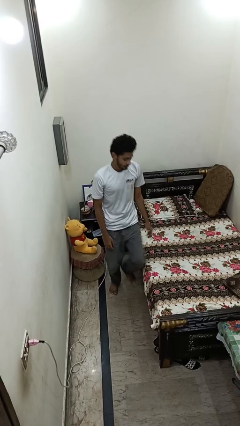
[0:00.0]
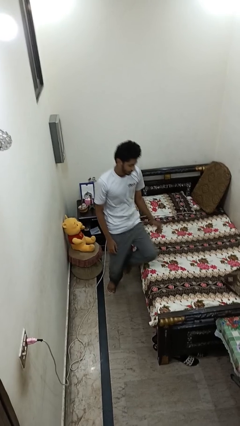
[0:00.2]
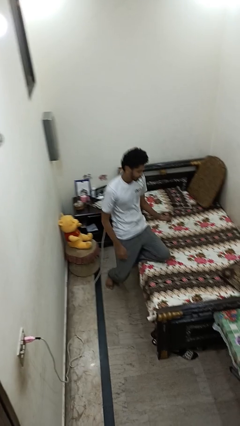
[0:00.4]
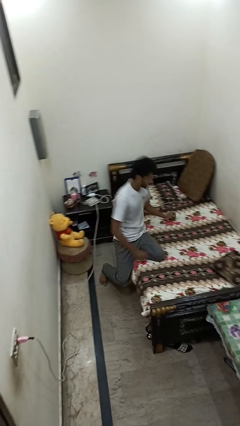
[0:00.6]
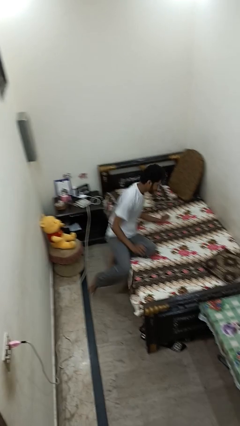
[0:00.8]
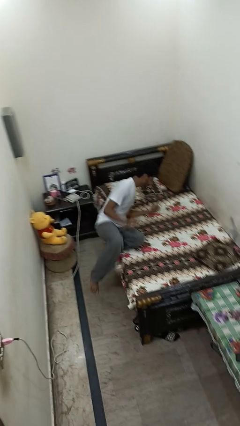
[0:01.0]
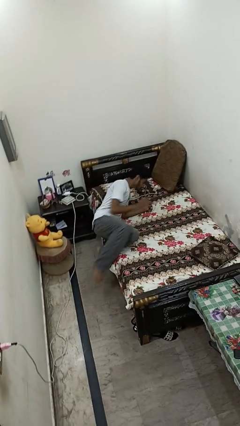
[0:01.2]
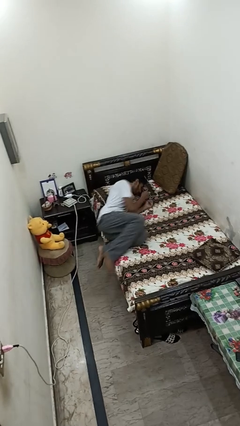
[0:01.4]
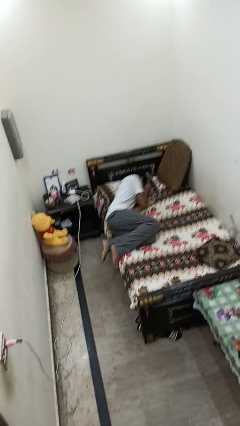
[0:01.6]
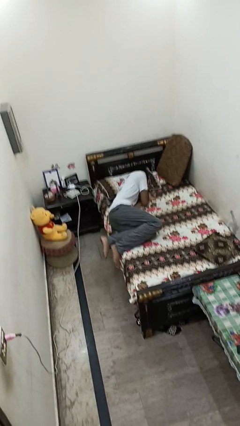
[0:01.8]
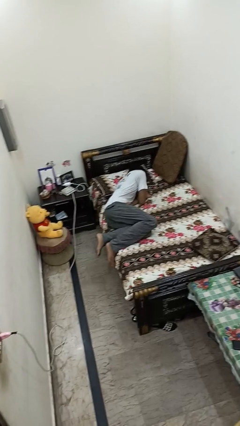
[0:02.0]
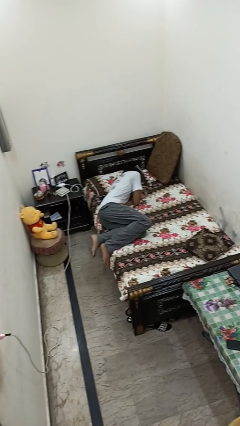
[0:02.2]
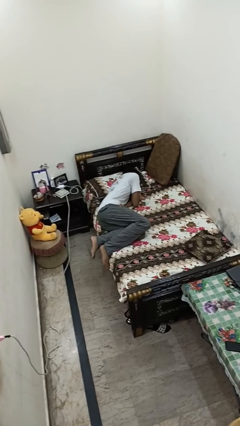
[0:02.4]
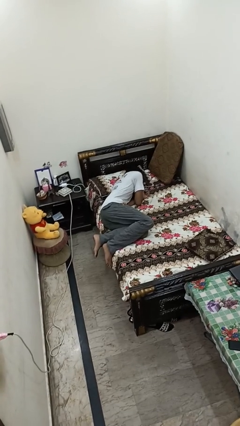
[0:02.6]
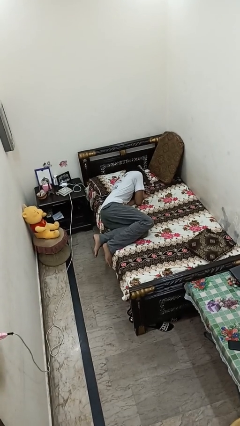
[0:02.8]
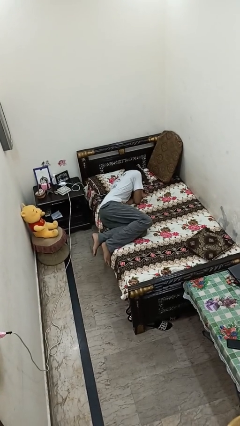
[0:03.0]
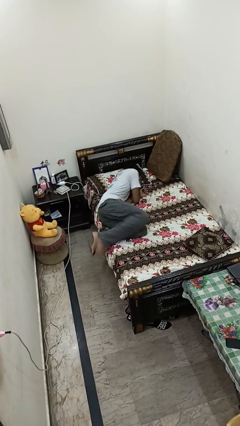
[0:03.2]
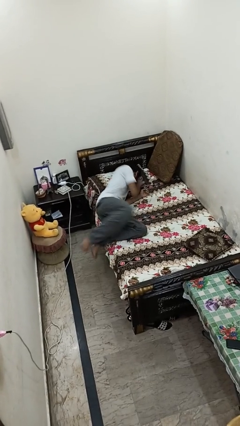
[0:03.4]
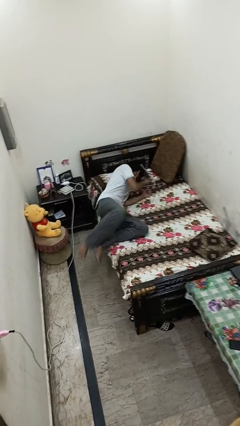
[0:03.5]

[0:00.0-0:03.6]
person lies down on bed

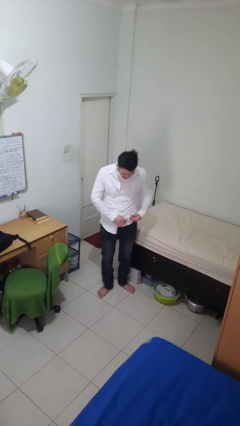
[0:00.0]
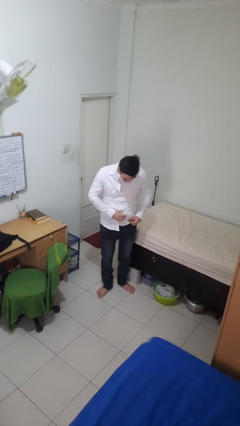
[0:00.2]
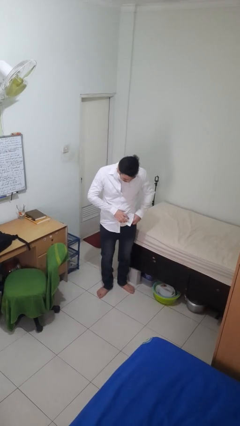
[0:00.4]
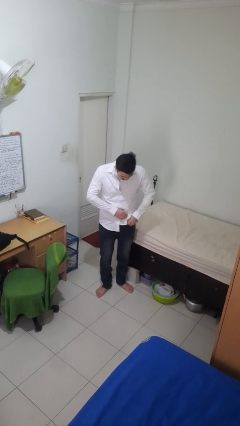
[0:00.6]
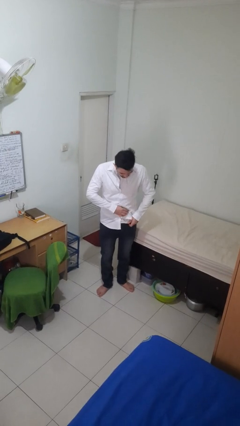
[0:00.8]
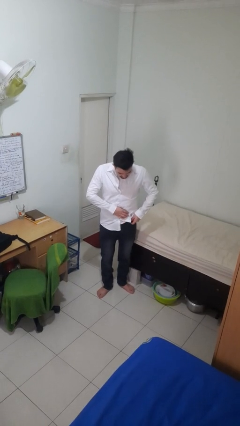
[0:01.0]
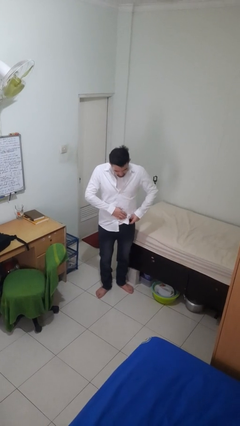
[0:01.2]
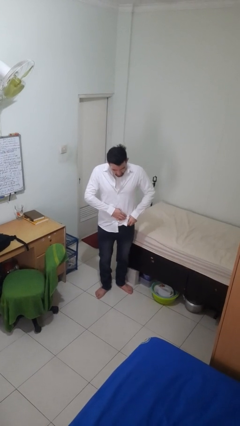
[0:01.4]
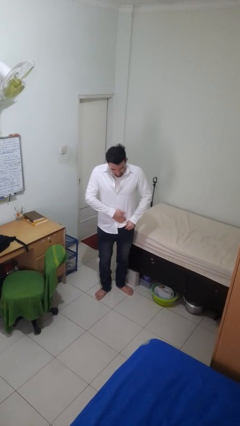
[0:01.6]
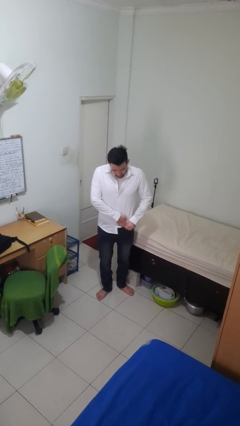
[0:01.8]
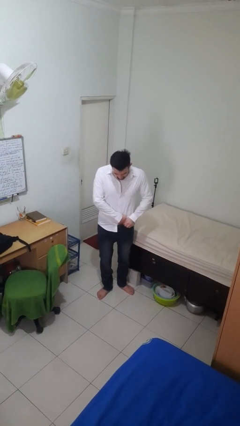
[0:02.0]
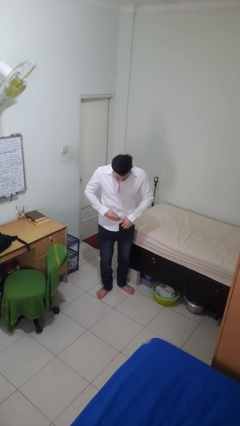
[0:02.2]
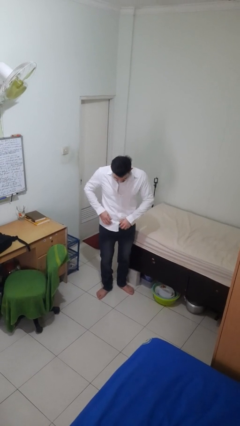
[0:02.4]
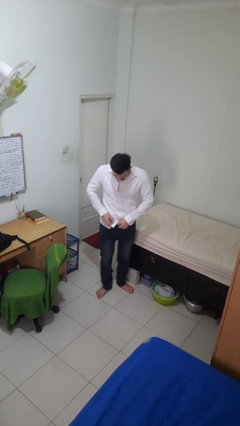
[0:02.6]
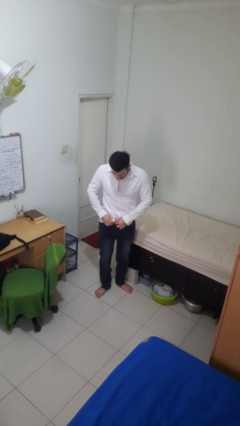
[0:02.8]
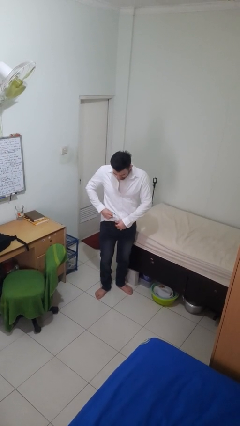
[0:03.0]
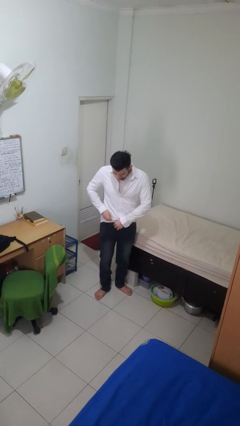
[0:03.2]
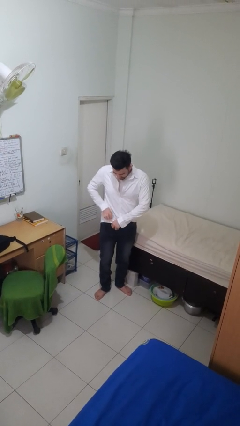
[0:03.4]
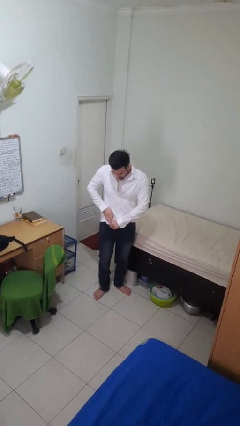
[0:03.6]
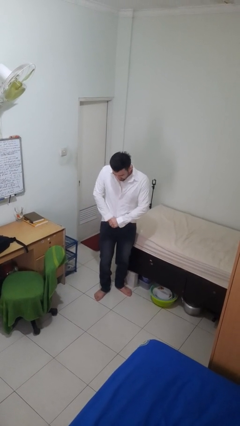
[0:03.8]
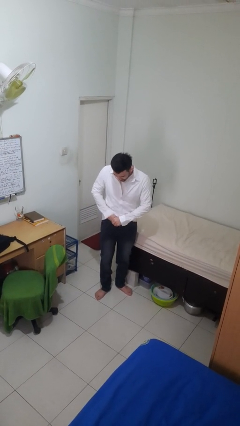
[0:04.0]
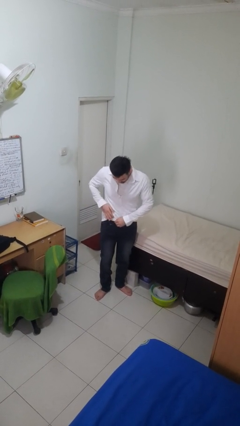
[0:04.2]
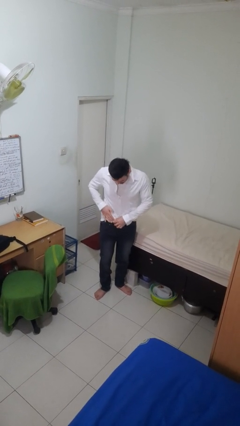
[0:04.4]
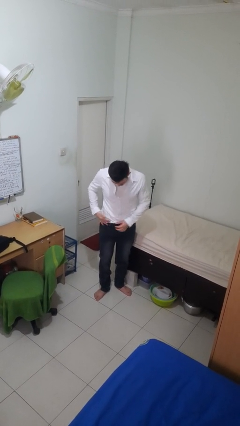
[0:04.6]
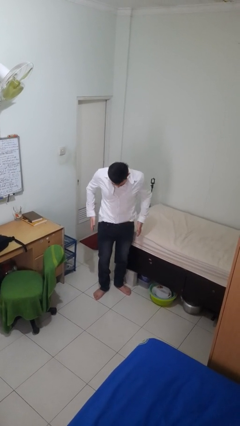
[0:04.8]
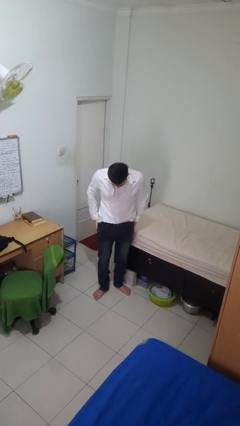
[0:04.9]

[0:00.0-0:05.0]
person tucks in shirt

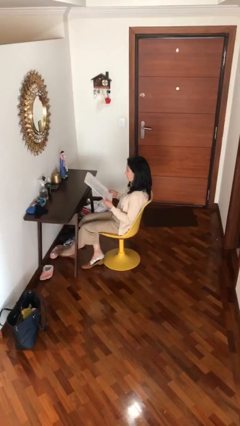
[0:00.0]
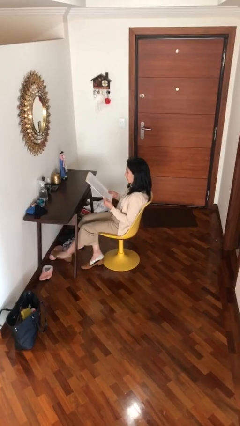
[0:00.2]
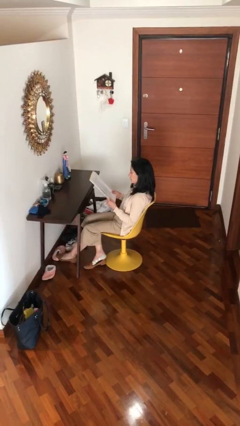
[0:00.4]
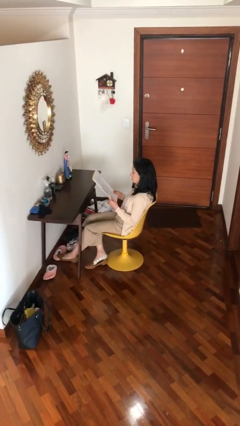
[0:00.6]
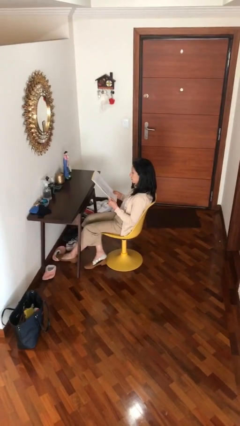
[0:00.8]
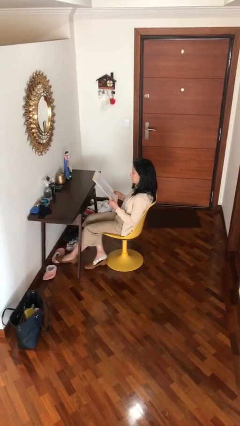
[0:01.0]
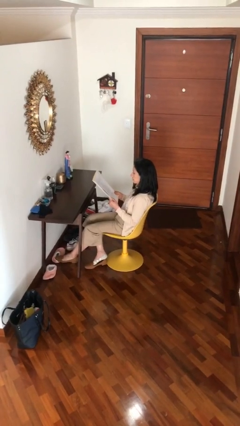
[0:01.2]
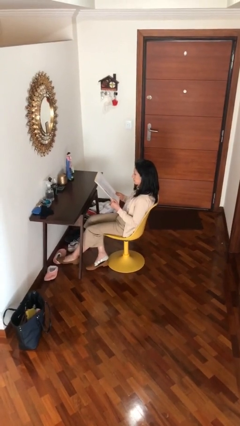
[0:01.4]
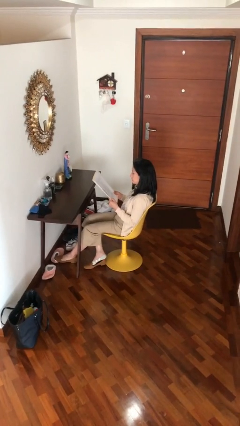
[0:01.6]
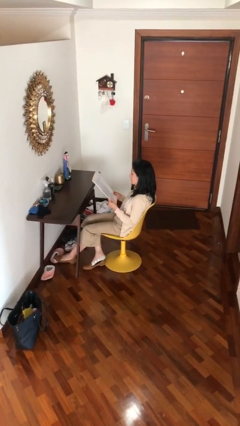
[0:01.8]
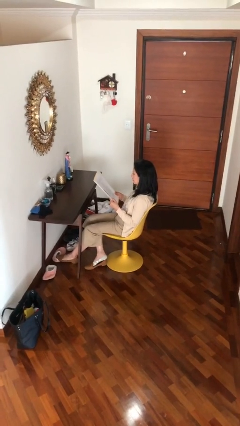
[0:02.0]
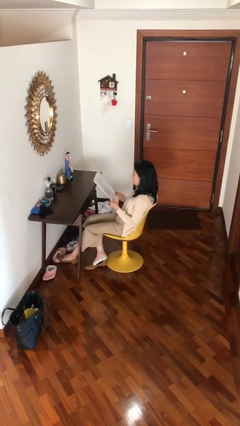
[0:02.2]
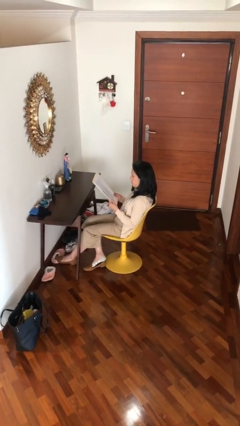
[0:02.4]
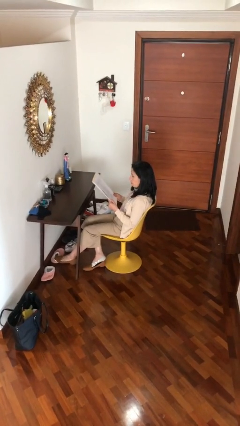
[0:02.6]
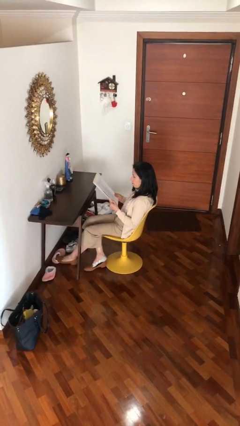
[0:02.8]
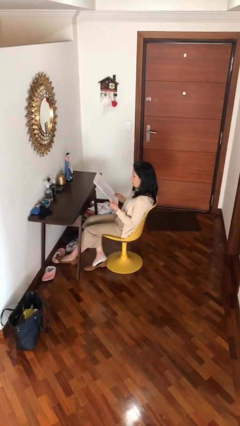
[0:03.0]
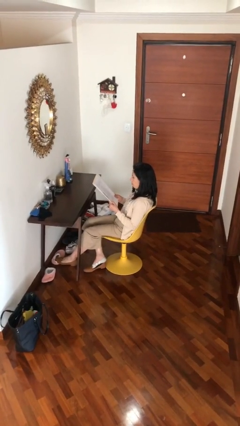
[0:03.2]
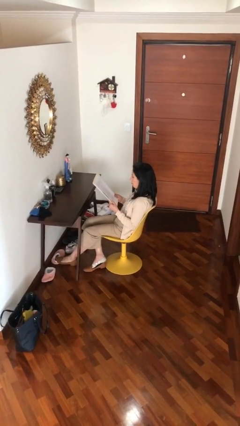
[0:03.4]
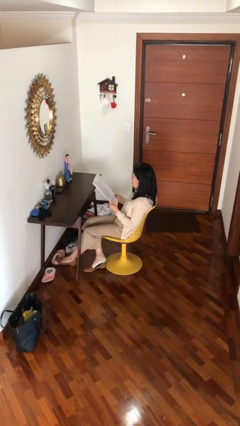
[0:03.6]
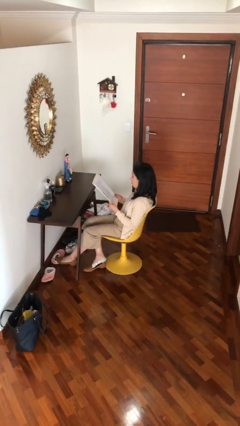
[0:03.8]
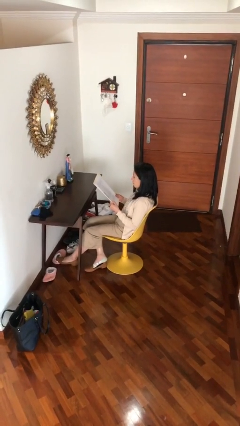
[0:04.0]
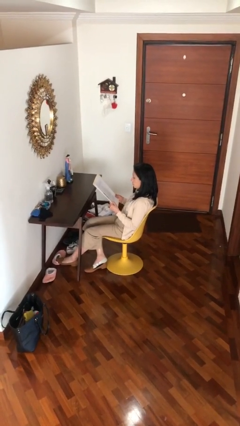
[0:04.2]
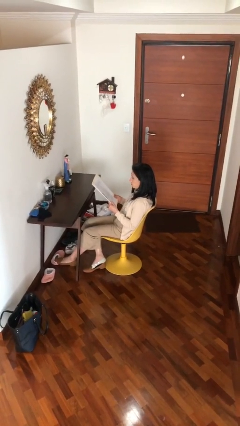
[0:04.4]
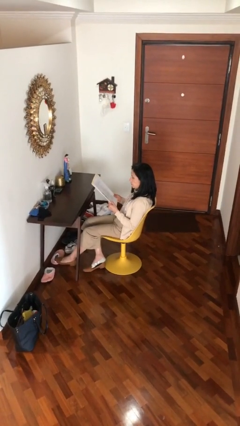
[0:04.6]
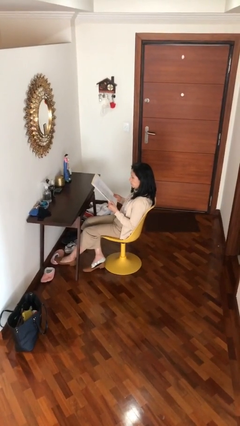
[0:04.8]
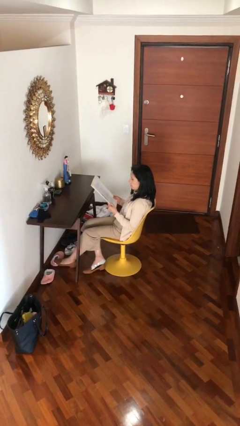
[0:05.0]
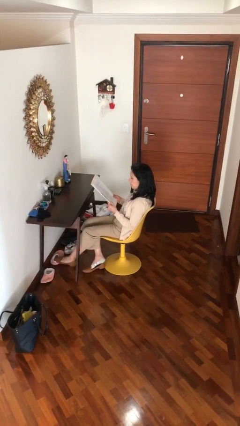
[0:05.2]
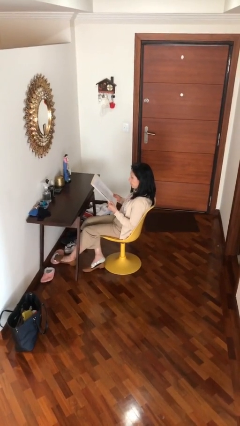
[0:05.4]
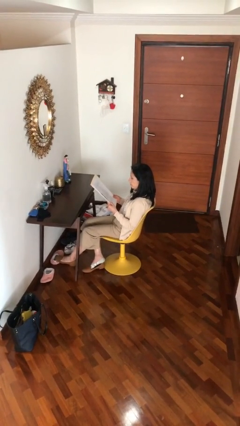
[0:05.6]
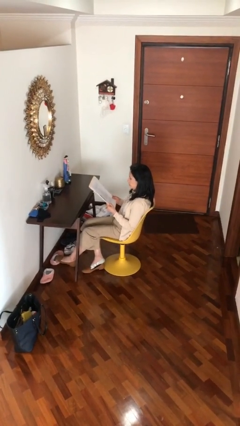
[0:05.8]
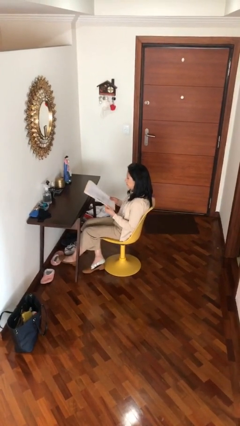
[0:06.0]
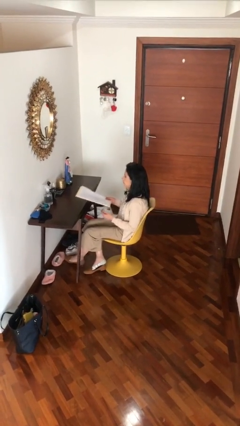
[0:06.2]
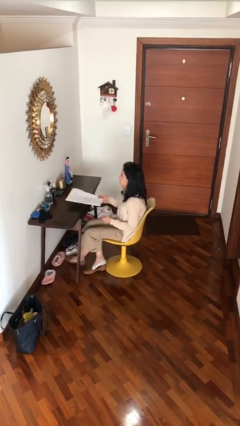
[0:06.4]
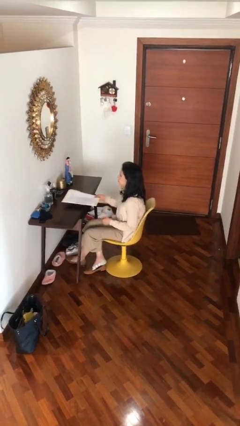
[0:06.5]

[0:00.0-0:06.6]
person reads document

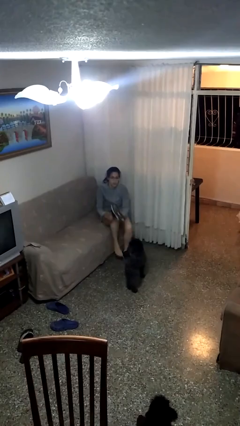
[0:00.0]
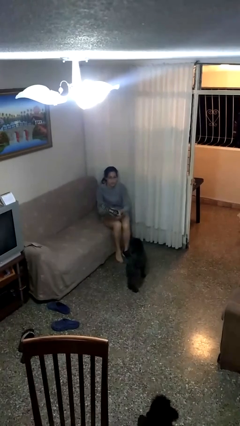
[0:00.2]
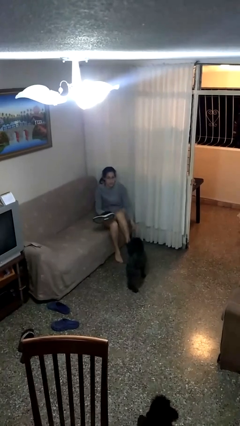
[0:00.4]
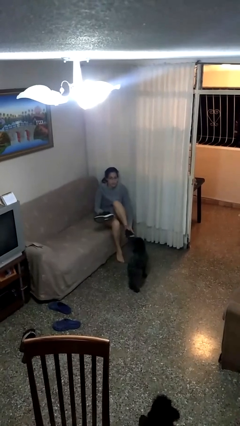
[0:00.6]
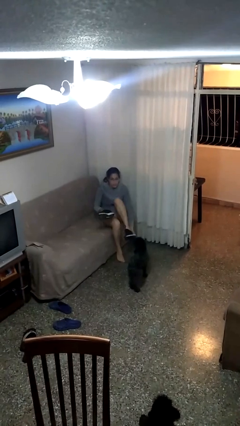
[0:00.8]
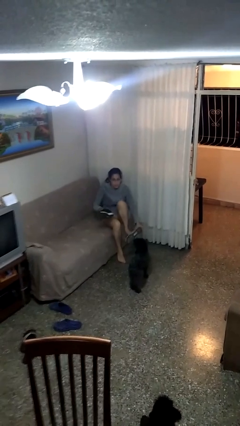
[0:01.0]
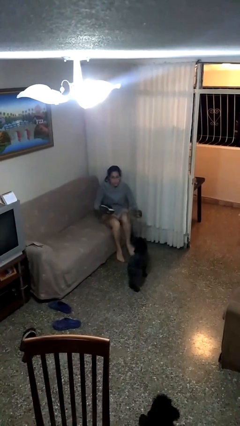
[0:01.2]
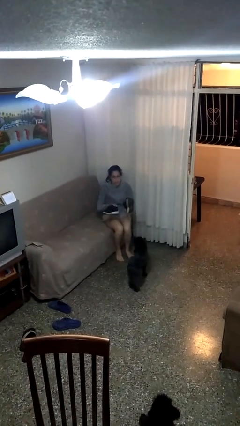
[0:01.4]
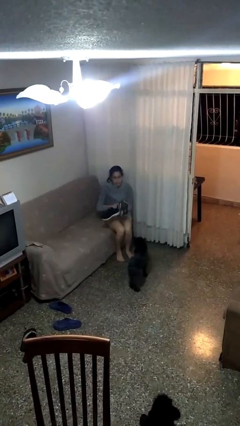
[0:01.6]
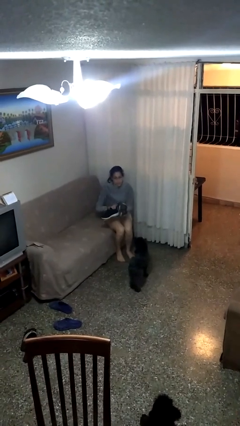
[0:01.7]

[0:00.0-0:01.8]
person takes off shoes

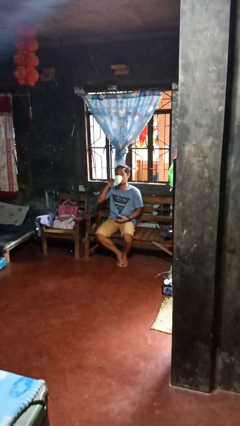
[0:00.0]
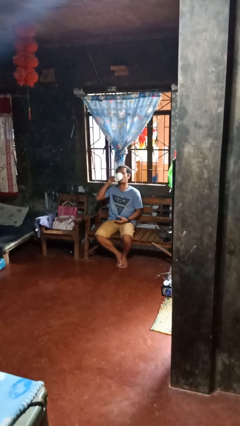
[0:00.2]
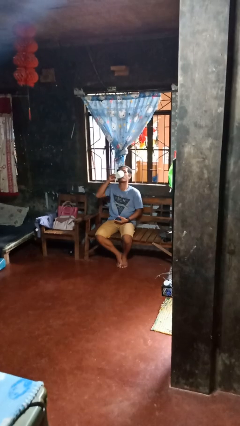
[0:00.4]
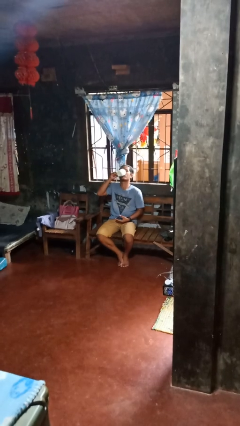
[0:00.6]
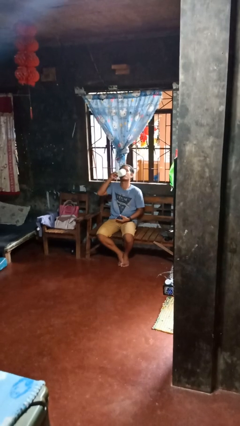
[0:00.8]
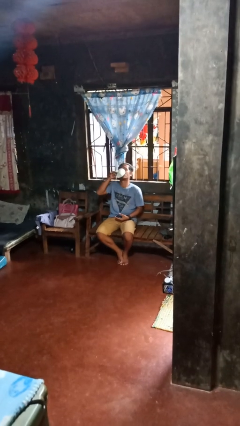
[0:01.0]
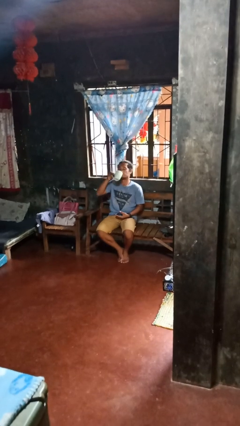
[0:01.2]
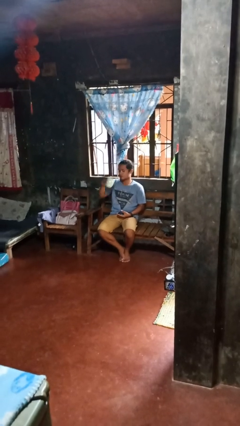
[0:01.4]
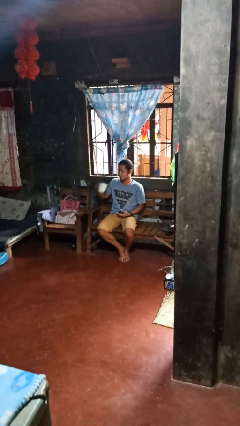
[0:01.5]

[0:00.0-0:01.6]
person drinks from cup
